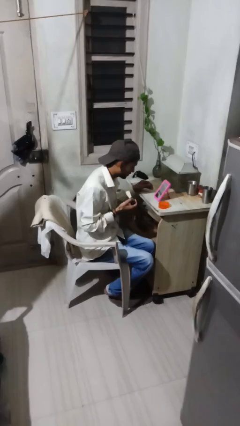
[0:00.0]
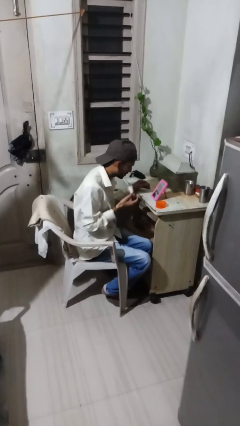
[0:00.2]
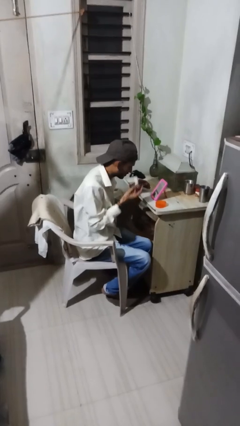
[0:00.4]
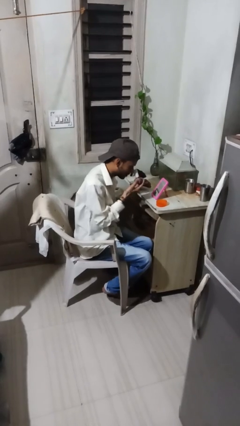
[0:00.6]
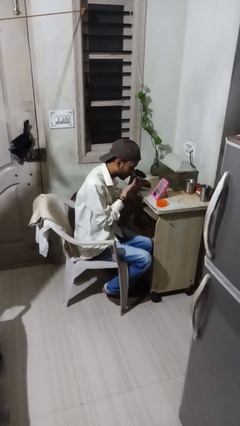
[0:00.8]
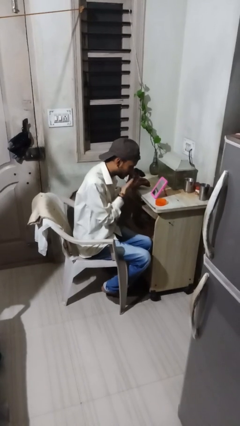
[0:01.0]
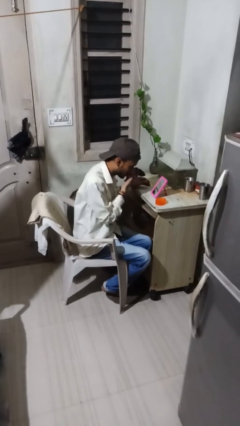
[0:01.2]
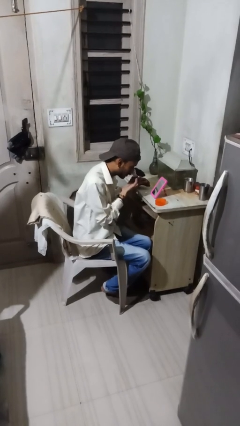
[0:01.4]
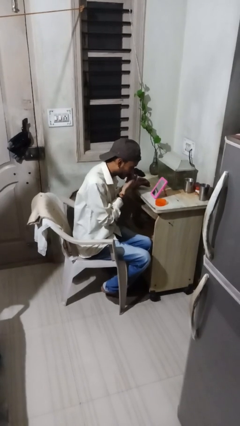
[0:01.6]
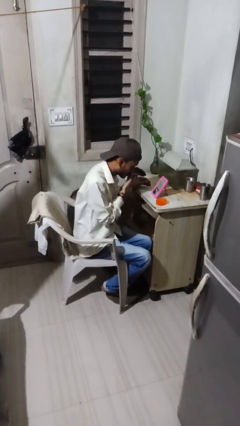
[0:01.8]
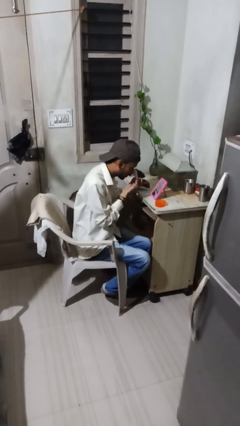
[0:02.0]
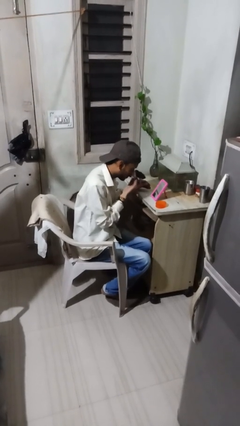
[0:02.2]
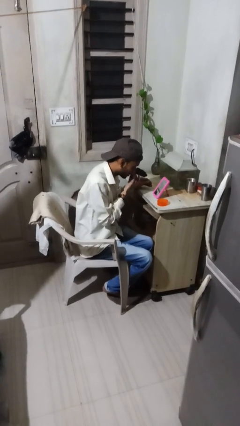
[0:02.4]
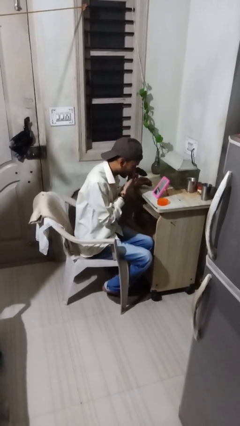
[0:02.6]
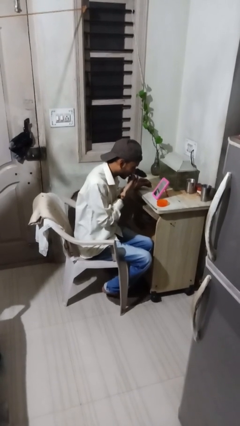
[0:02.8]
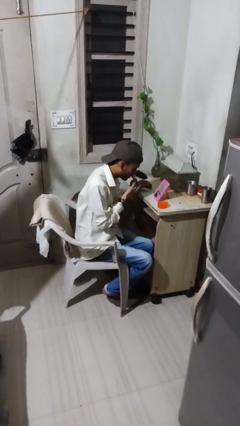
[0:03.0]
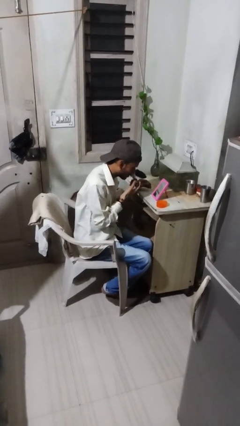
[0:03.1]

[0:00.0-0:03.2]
person applies foundation makeup

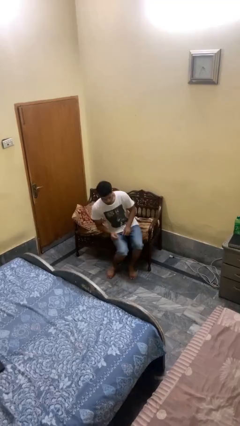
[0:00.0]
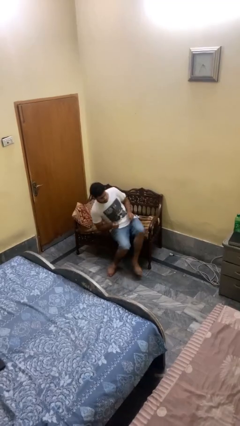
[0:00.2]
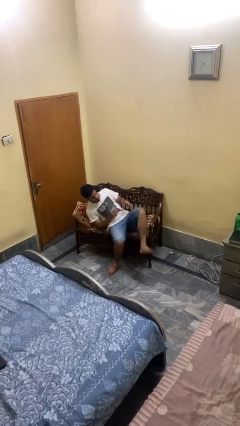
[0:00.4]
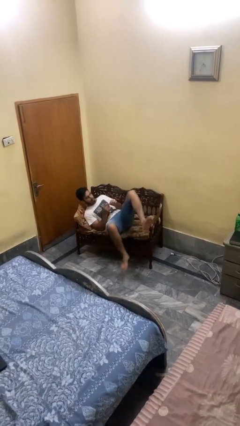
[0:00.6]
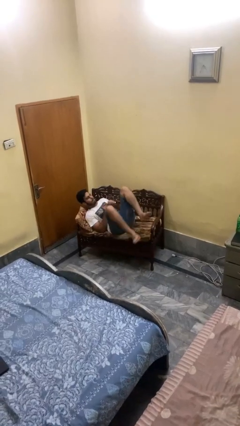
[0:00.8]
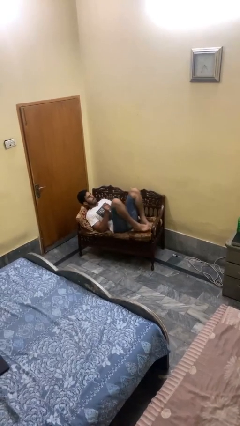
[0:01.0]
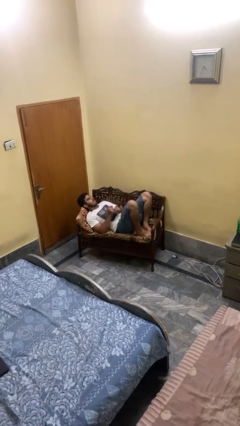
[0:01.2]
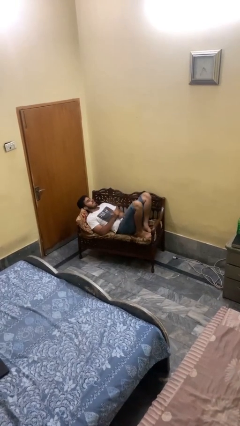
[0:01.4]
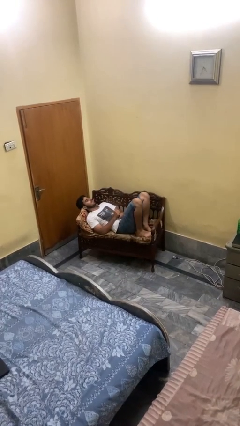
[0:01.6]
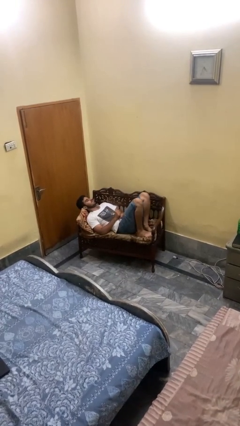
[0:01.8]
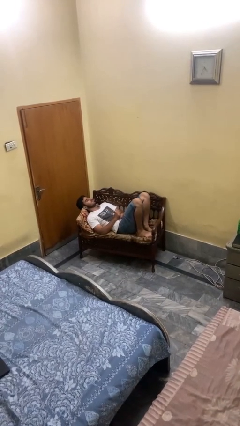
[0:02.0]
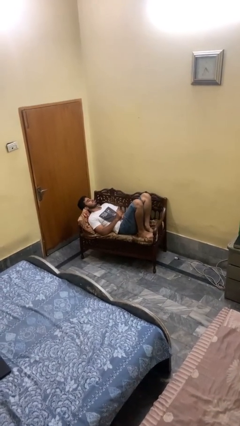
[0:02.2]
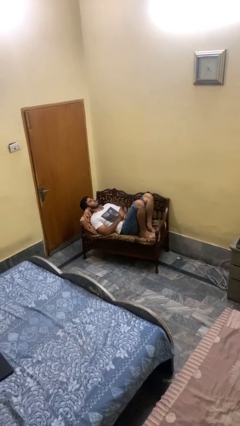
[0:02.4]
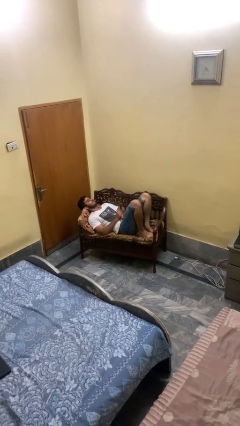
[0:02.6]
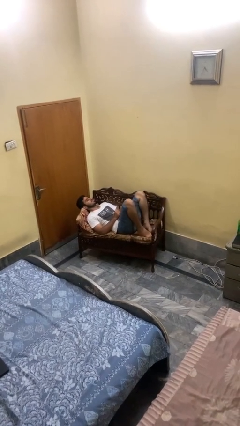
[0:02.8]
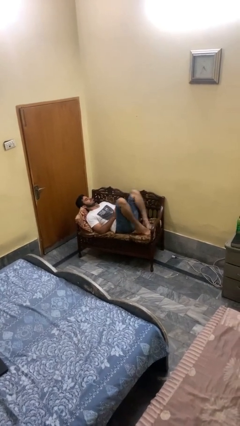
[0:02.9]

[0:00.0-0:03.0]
person lies down on couch

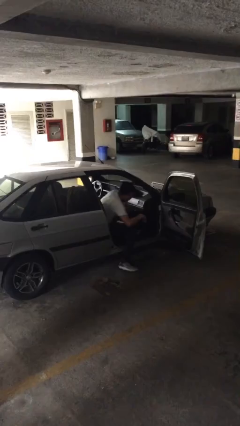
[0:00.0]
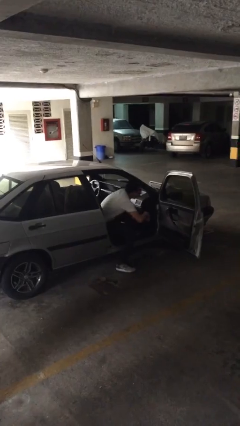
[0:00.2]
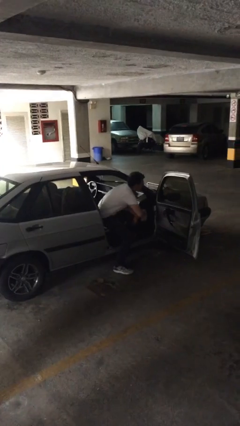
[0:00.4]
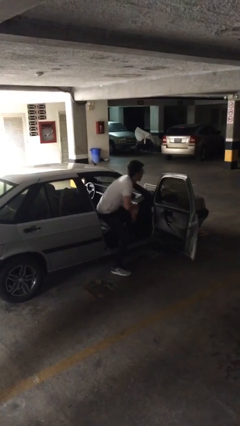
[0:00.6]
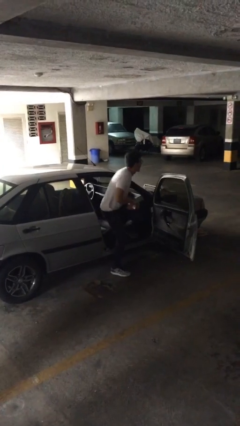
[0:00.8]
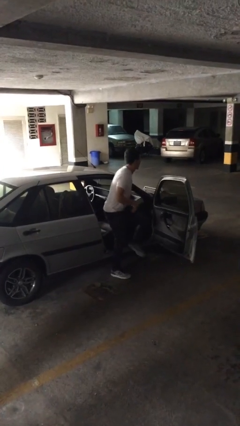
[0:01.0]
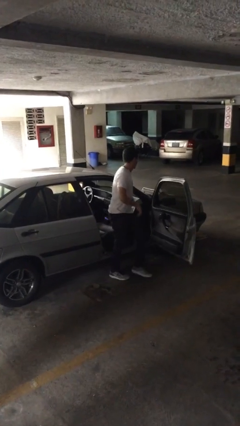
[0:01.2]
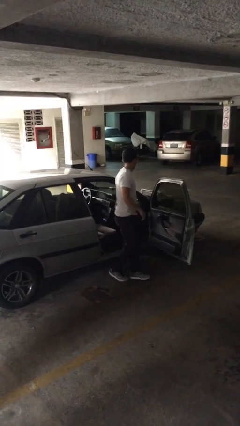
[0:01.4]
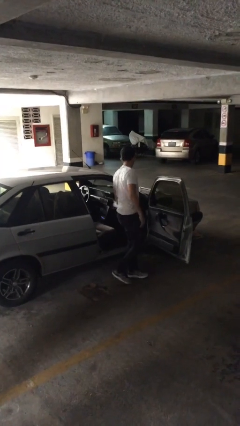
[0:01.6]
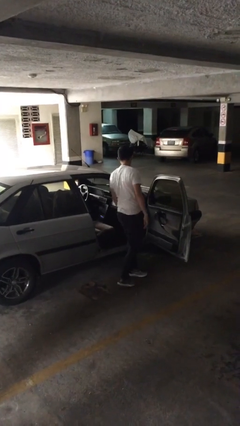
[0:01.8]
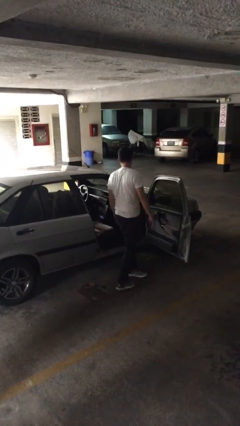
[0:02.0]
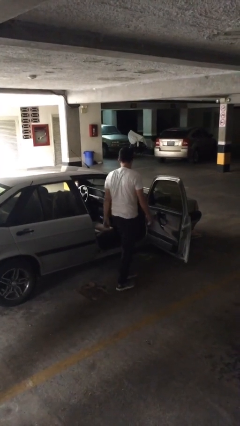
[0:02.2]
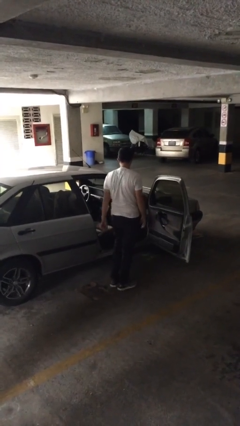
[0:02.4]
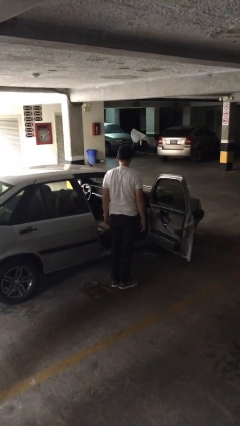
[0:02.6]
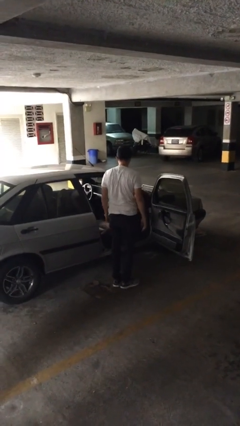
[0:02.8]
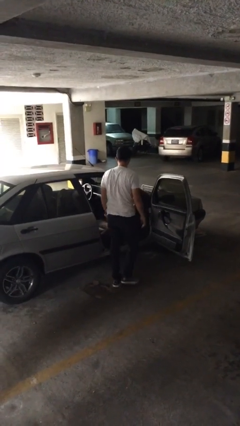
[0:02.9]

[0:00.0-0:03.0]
person exits car

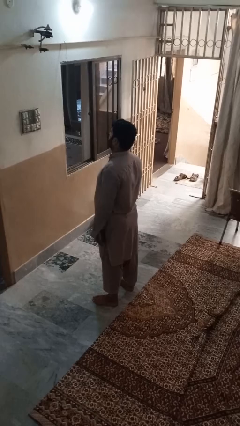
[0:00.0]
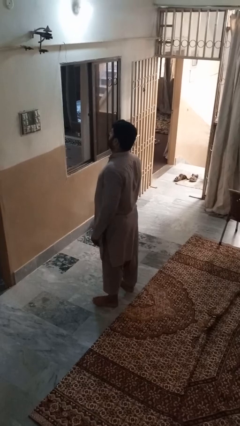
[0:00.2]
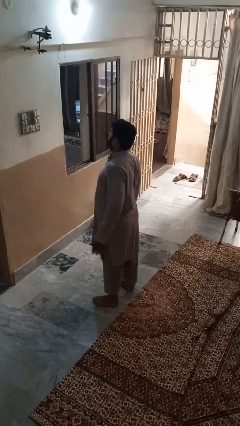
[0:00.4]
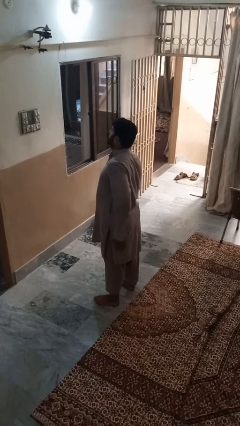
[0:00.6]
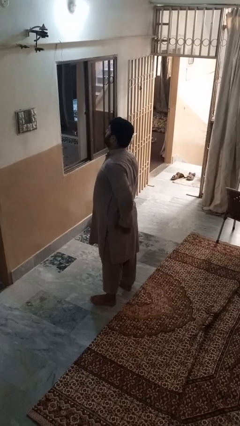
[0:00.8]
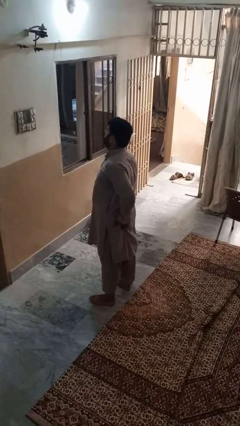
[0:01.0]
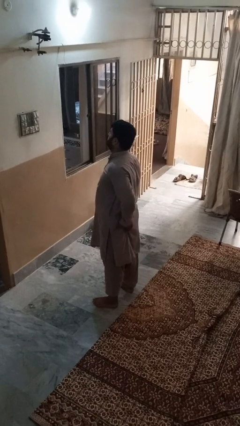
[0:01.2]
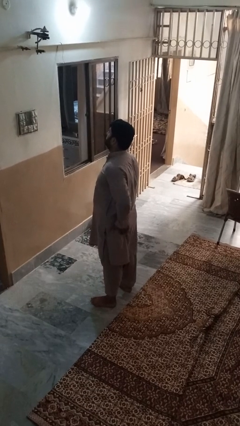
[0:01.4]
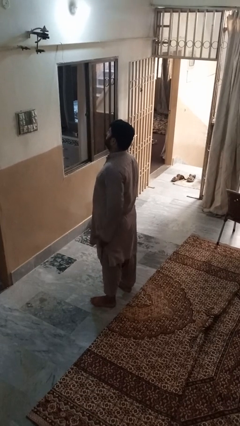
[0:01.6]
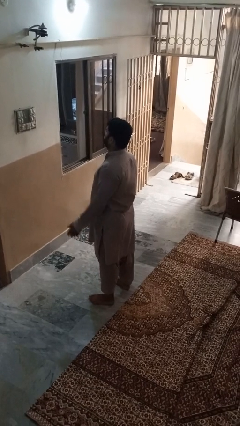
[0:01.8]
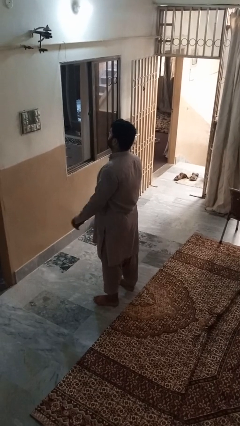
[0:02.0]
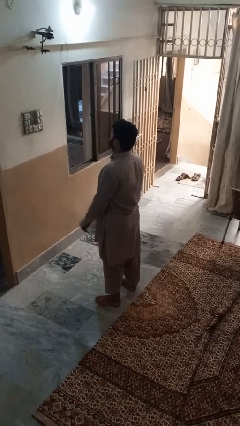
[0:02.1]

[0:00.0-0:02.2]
person wiggles hips

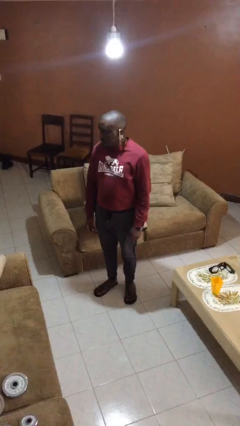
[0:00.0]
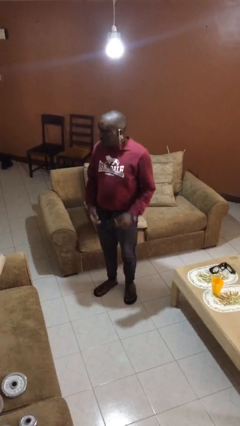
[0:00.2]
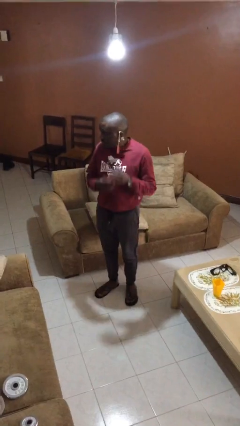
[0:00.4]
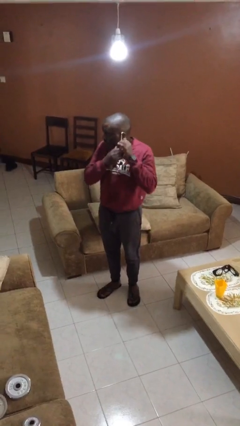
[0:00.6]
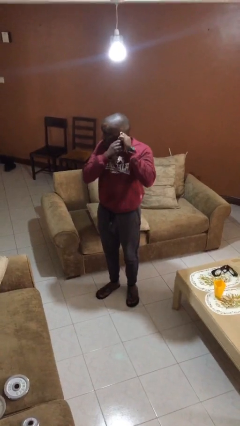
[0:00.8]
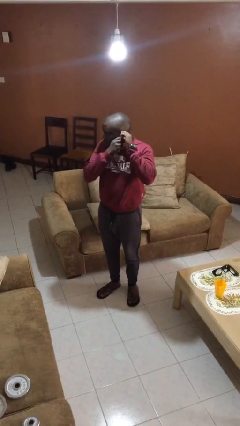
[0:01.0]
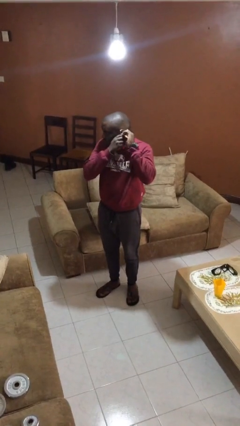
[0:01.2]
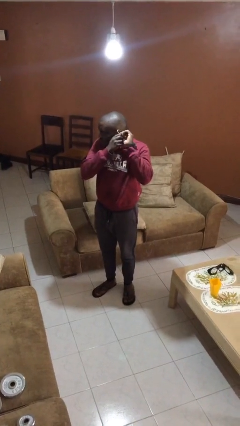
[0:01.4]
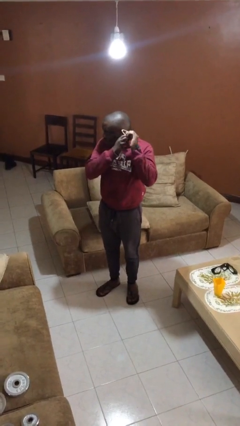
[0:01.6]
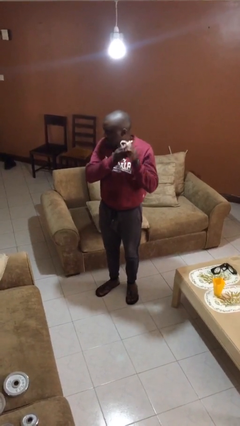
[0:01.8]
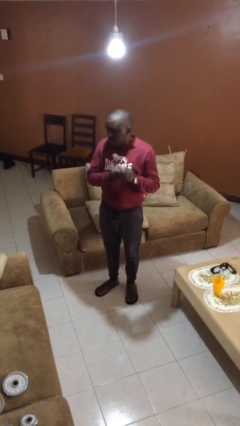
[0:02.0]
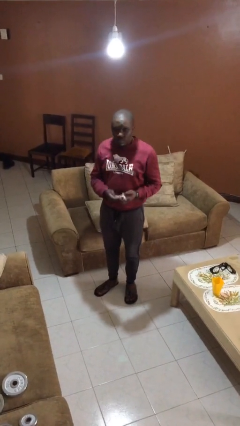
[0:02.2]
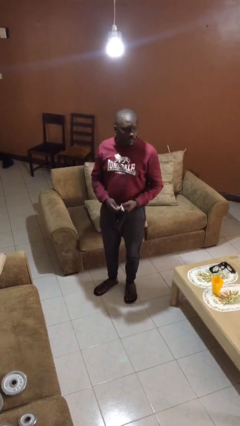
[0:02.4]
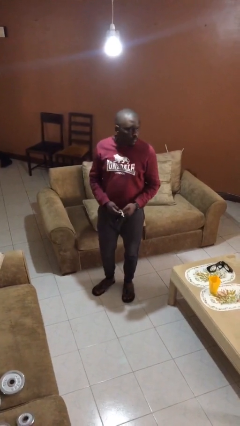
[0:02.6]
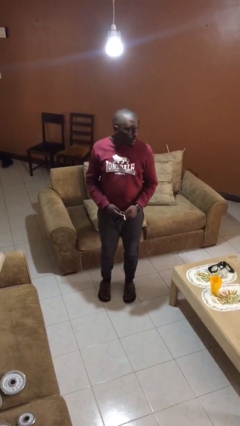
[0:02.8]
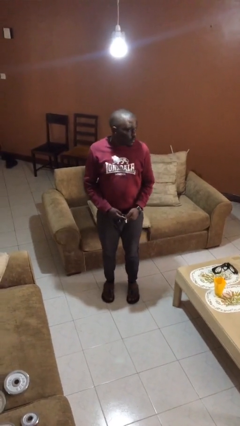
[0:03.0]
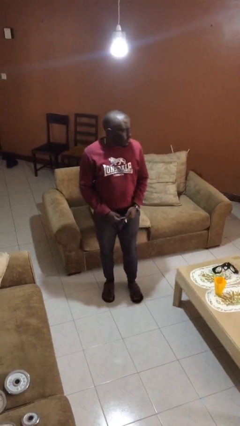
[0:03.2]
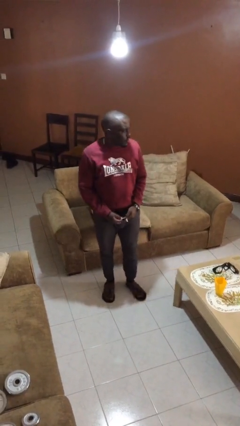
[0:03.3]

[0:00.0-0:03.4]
person takes off earrings

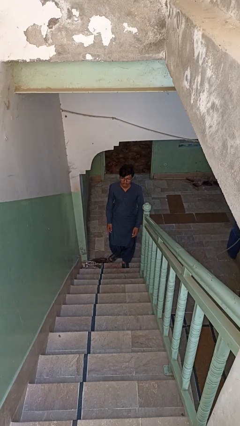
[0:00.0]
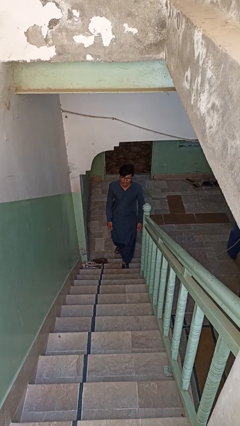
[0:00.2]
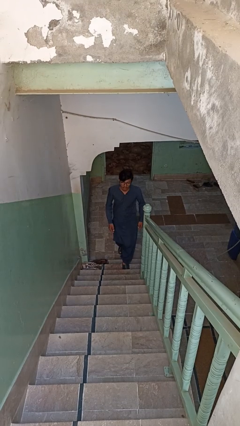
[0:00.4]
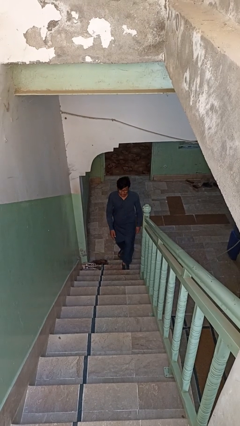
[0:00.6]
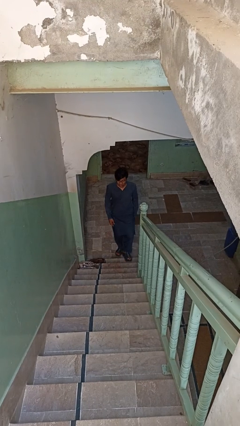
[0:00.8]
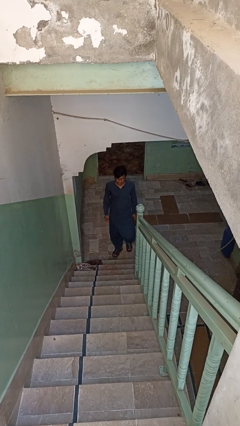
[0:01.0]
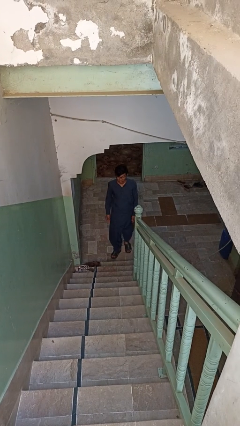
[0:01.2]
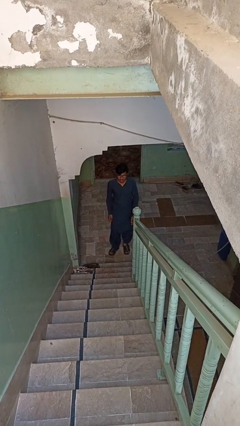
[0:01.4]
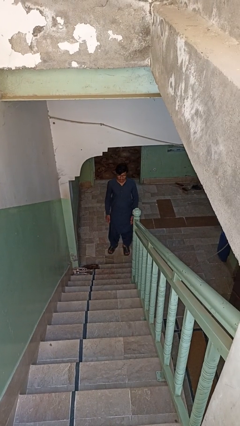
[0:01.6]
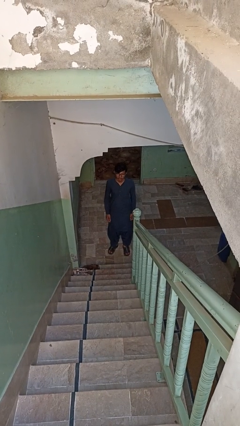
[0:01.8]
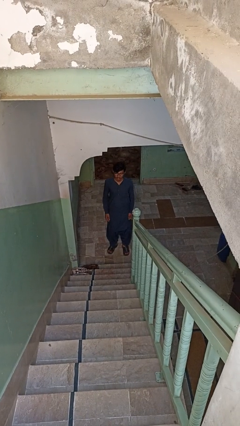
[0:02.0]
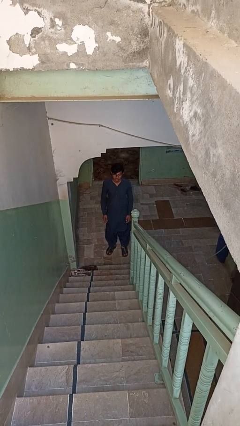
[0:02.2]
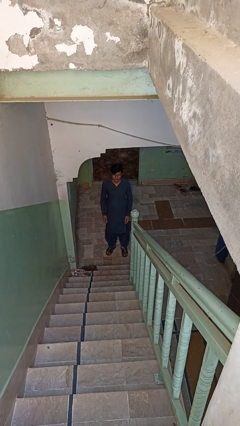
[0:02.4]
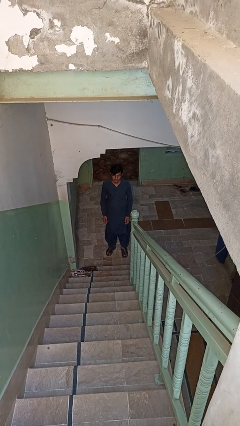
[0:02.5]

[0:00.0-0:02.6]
person climbs down stairs
